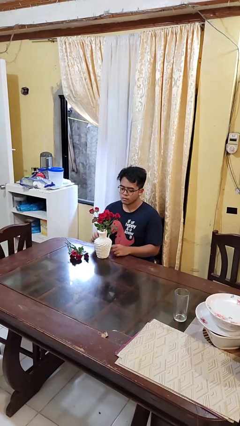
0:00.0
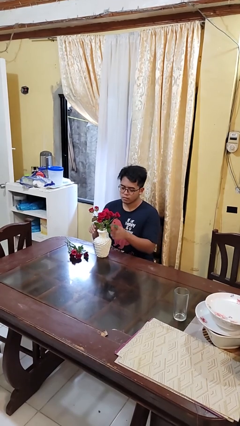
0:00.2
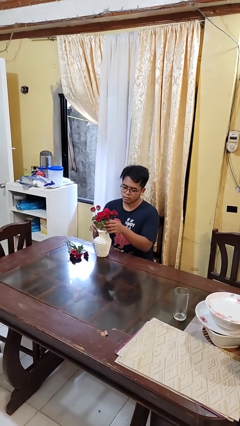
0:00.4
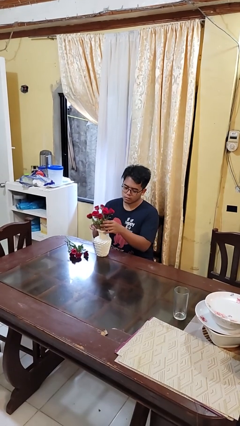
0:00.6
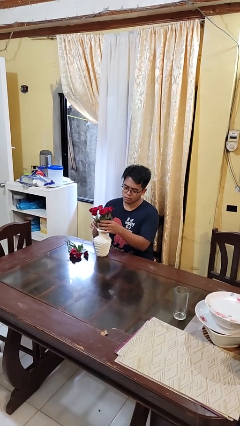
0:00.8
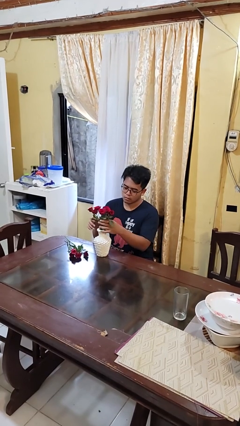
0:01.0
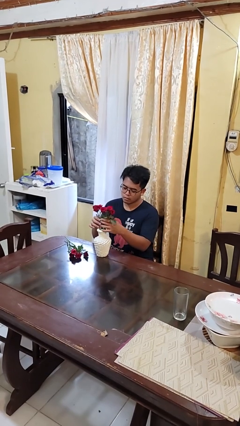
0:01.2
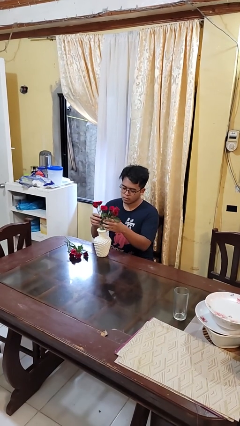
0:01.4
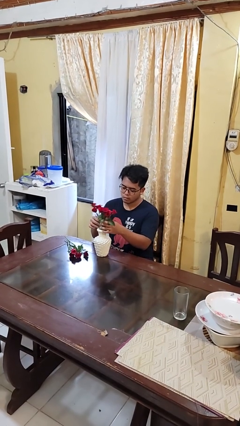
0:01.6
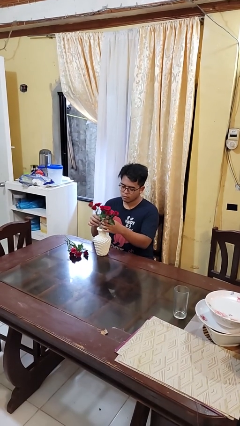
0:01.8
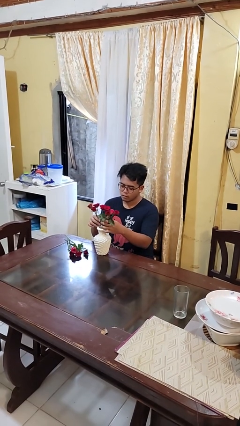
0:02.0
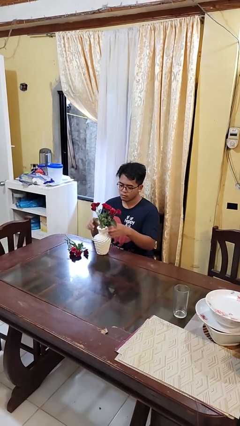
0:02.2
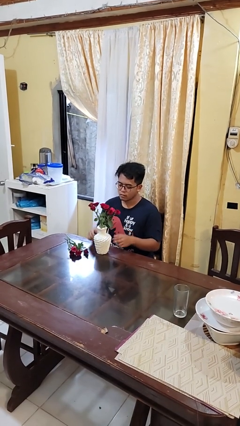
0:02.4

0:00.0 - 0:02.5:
person arranges flowers in vase

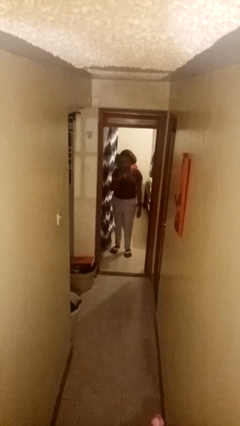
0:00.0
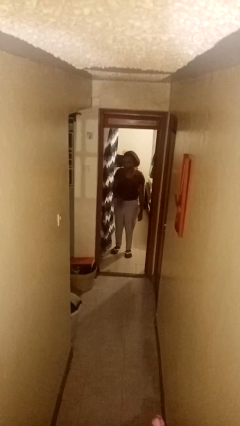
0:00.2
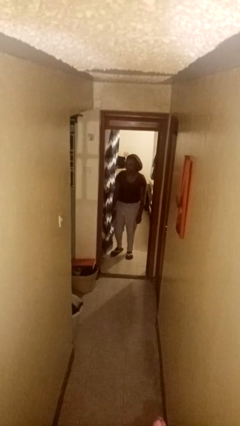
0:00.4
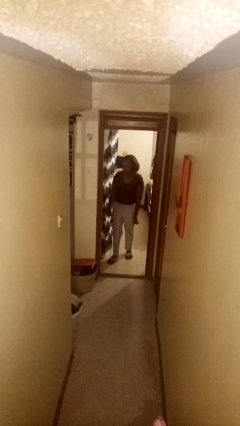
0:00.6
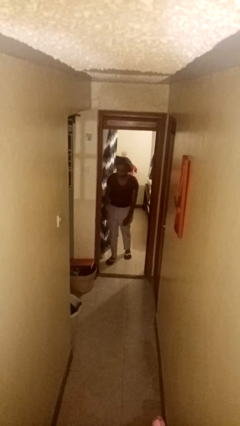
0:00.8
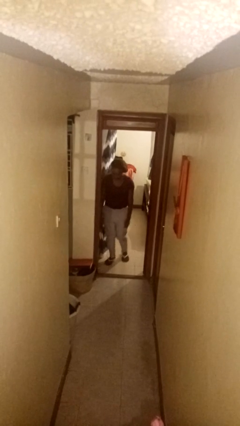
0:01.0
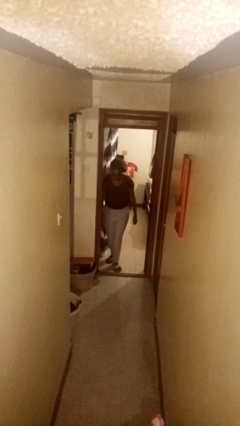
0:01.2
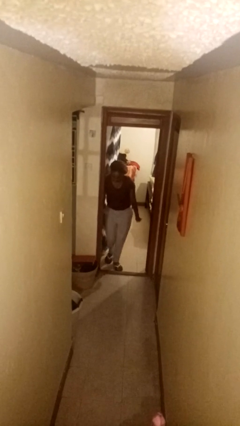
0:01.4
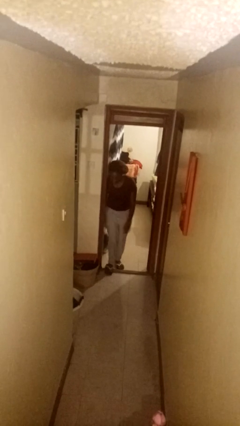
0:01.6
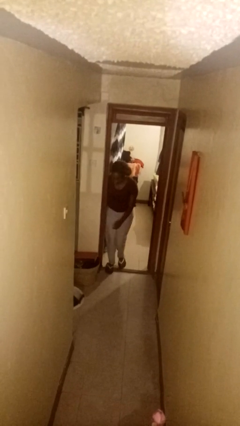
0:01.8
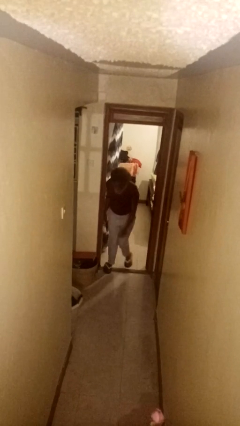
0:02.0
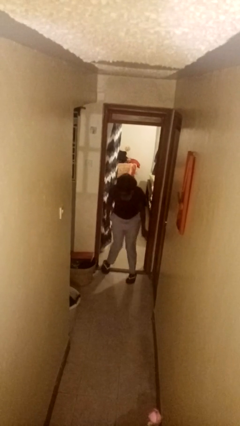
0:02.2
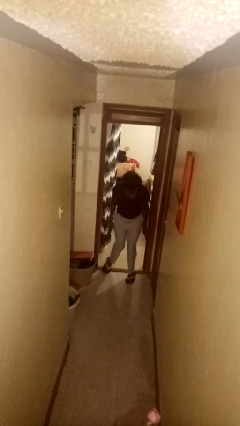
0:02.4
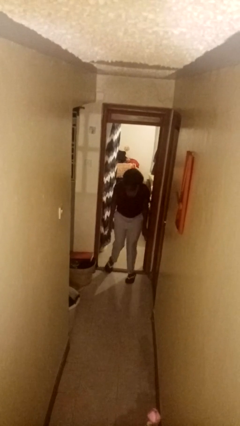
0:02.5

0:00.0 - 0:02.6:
person bumps into wall

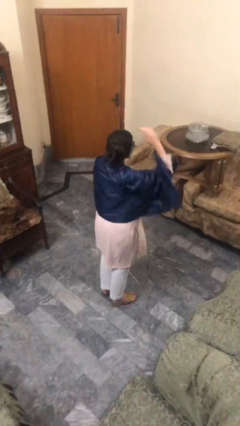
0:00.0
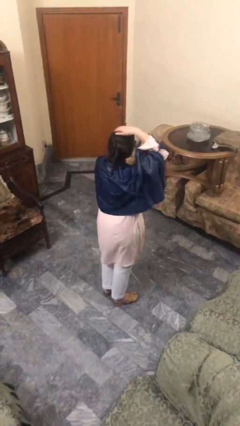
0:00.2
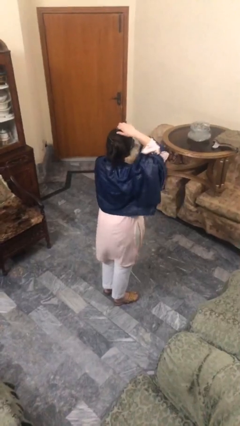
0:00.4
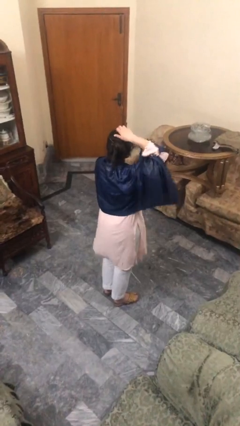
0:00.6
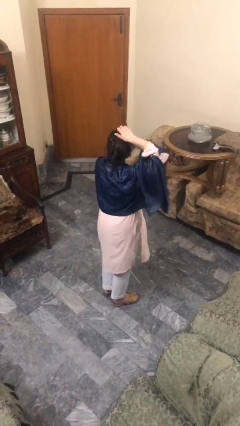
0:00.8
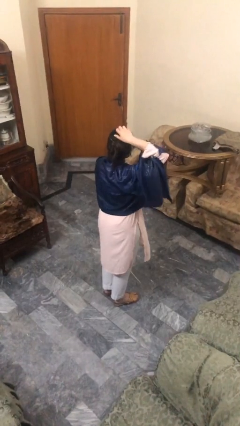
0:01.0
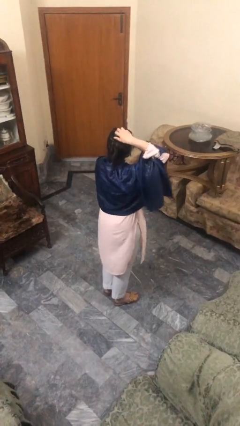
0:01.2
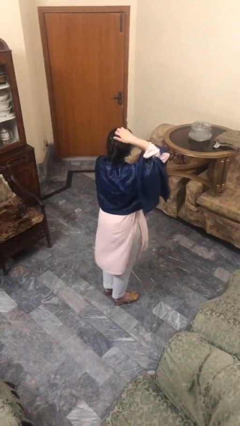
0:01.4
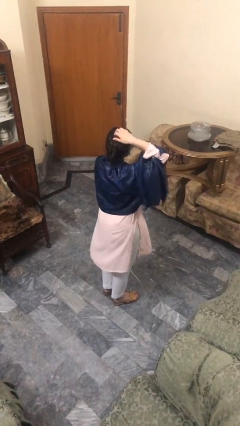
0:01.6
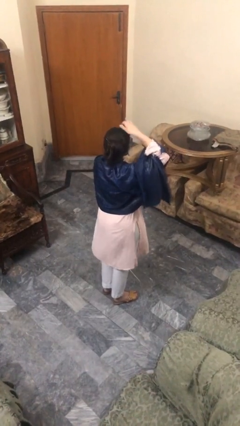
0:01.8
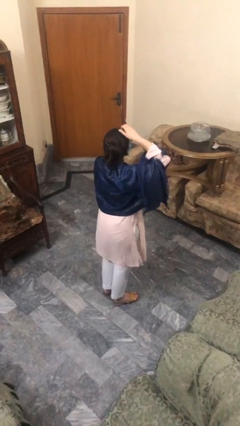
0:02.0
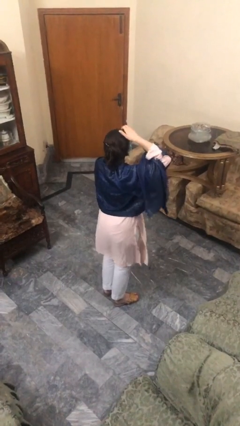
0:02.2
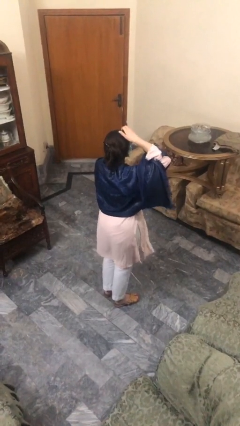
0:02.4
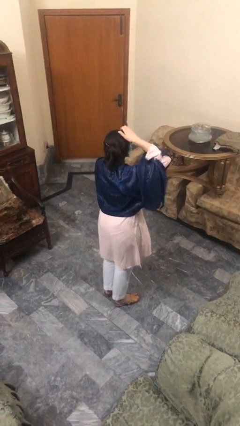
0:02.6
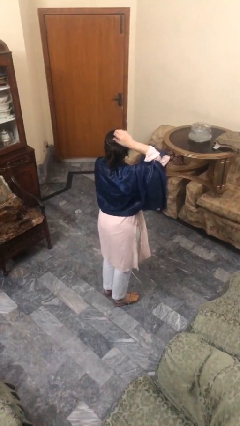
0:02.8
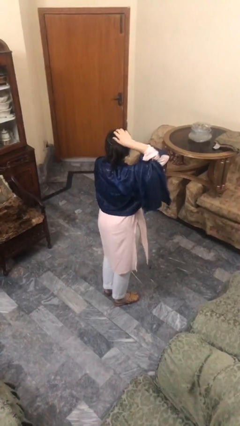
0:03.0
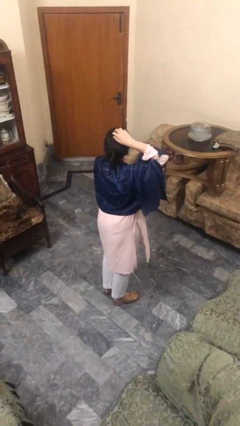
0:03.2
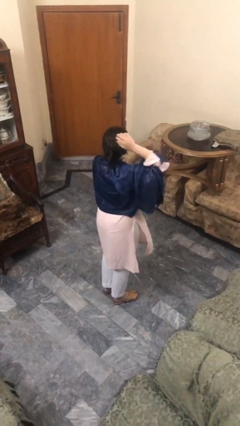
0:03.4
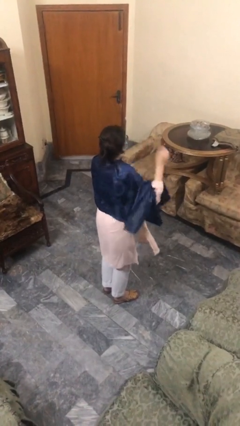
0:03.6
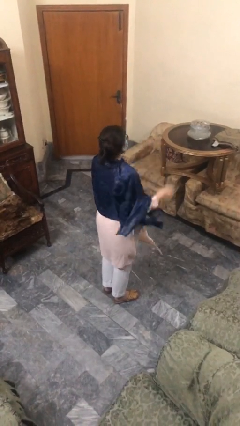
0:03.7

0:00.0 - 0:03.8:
person scratches face

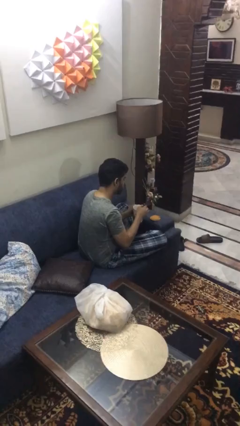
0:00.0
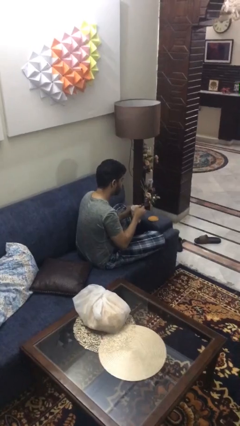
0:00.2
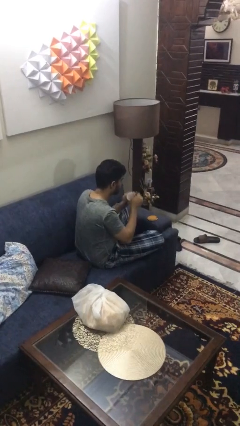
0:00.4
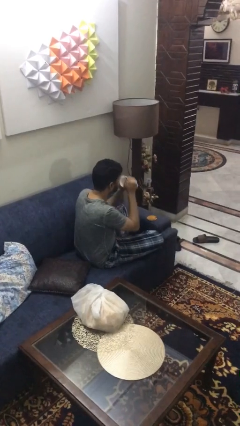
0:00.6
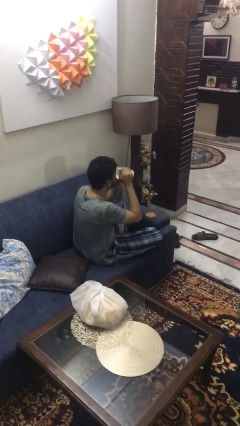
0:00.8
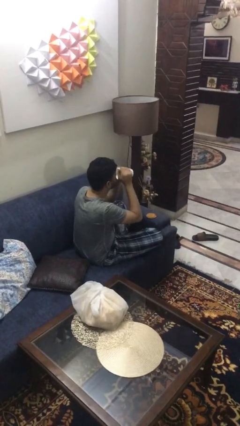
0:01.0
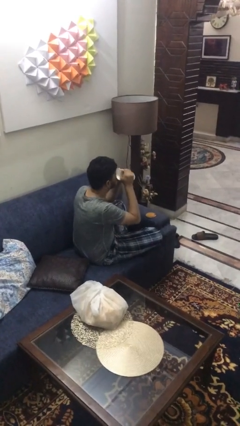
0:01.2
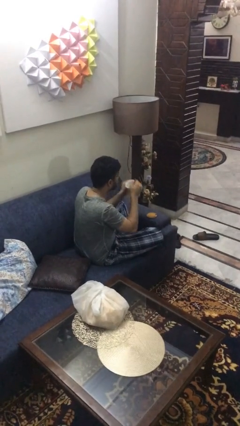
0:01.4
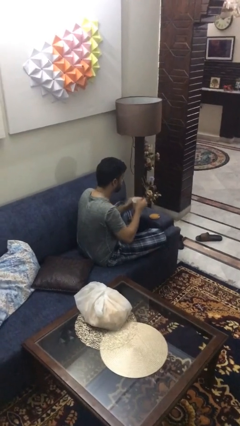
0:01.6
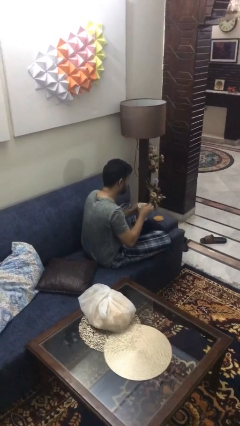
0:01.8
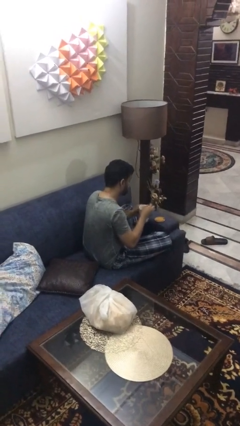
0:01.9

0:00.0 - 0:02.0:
person drinks from mug

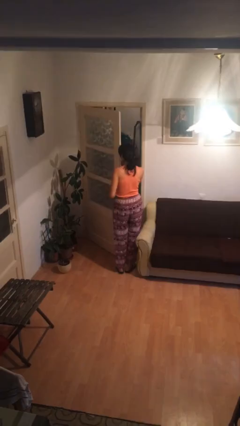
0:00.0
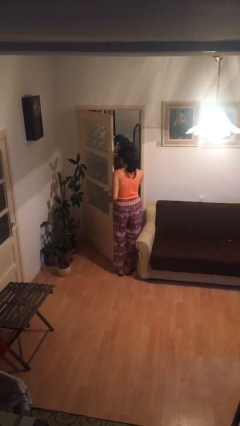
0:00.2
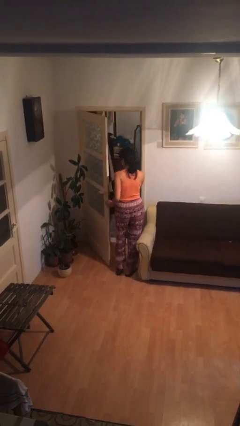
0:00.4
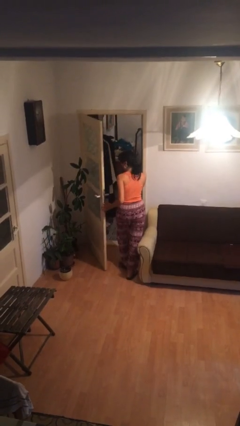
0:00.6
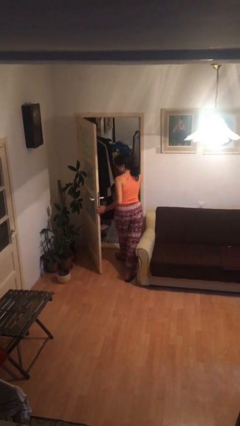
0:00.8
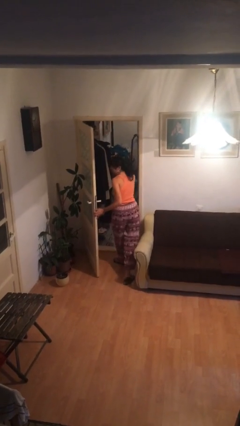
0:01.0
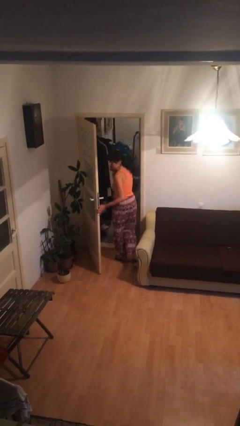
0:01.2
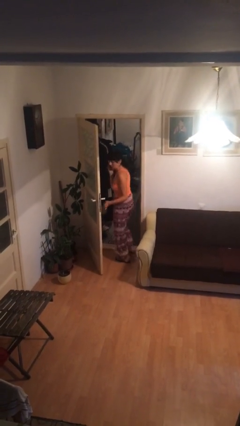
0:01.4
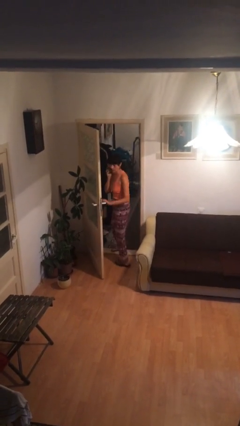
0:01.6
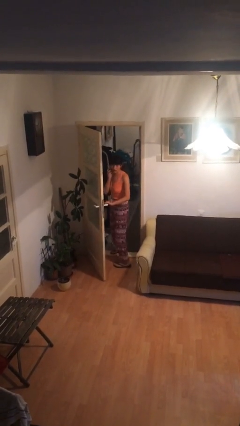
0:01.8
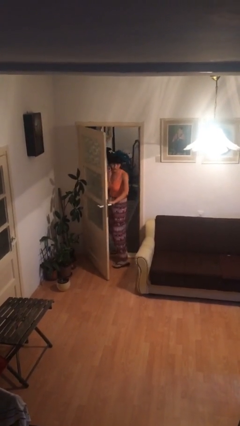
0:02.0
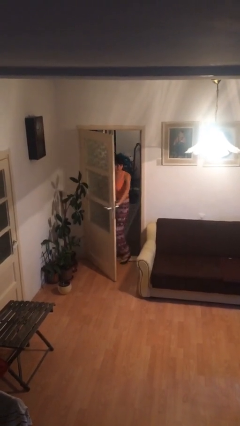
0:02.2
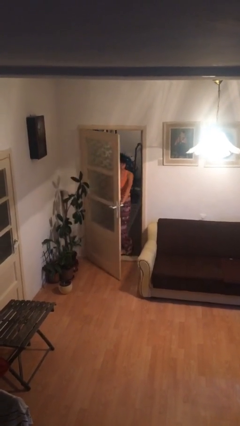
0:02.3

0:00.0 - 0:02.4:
person exits scene through structure

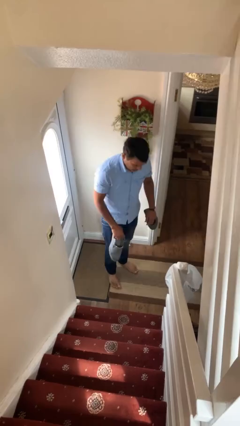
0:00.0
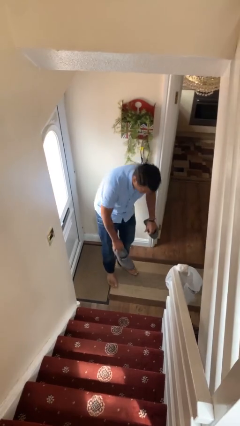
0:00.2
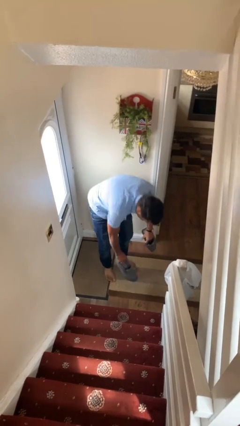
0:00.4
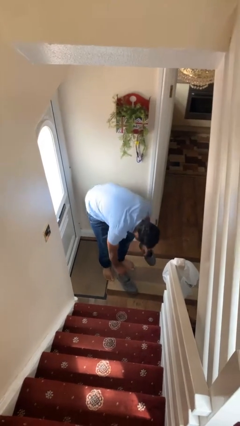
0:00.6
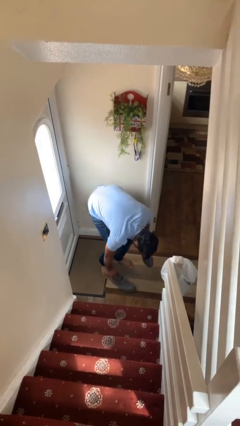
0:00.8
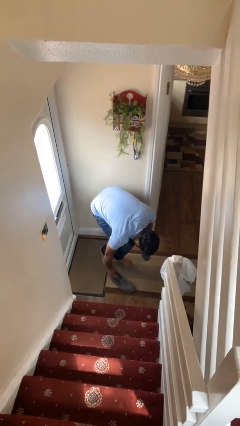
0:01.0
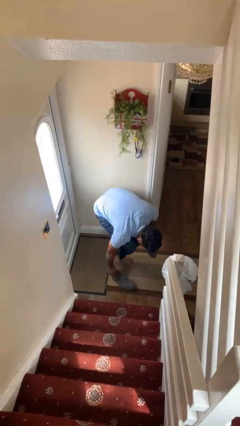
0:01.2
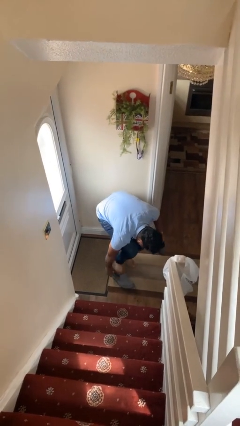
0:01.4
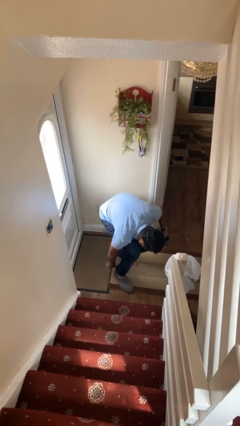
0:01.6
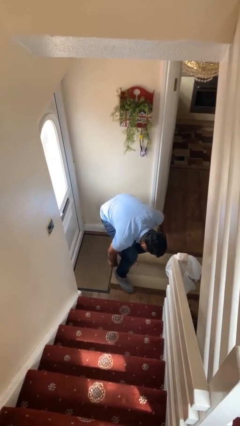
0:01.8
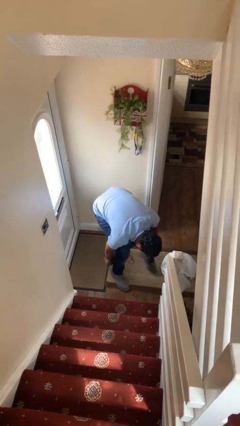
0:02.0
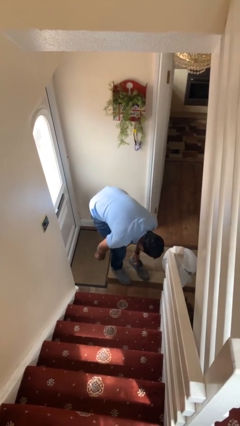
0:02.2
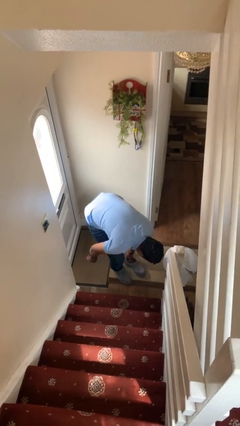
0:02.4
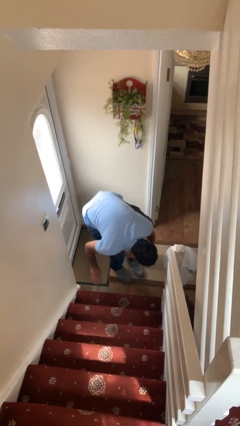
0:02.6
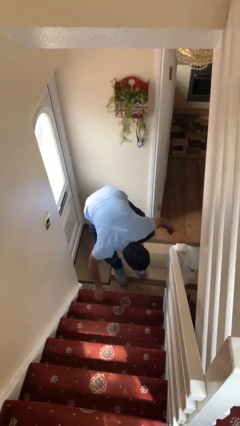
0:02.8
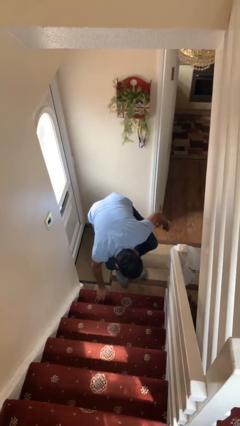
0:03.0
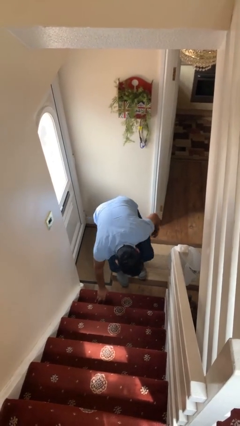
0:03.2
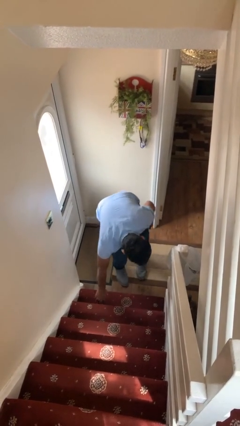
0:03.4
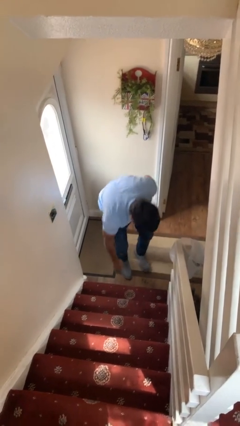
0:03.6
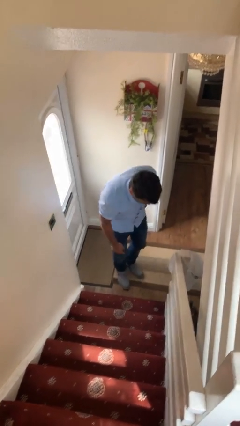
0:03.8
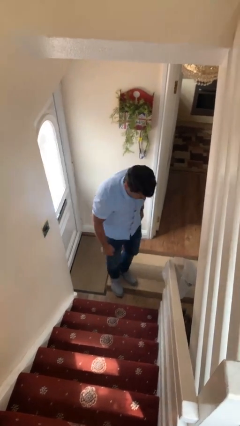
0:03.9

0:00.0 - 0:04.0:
person puts on shoes
